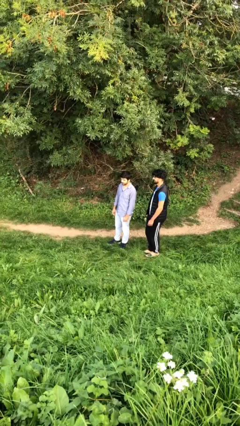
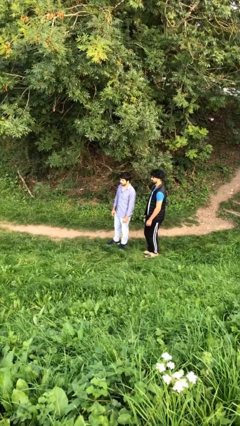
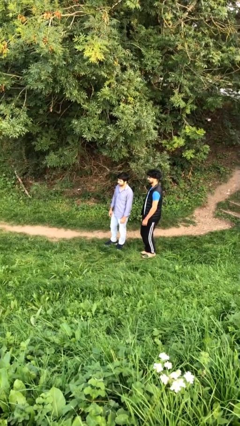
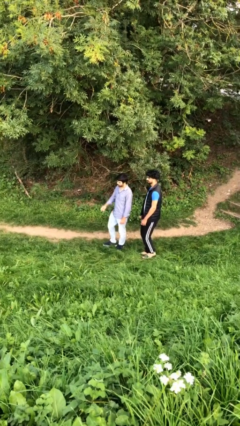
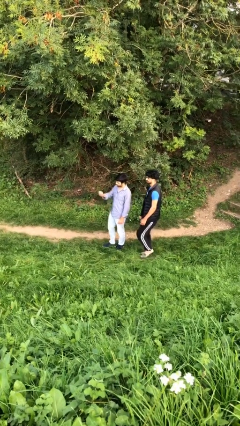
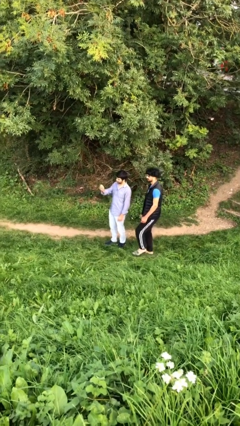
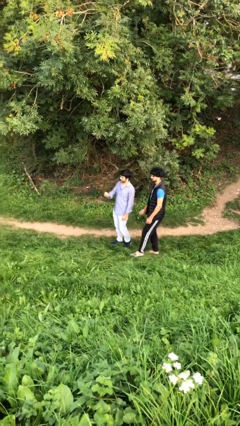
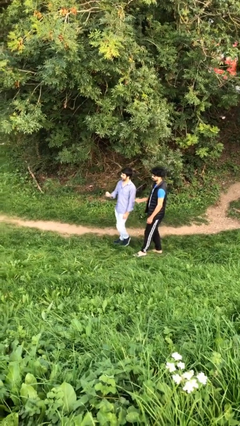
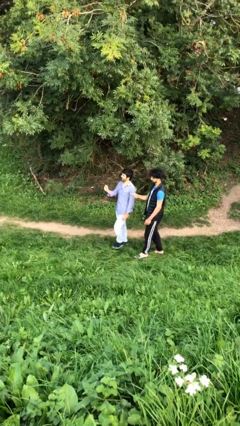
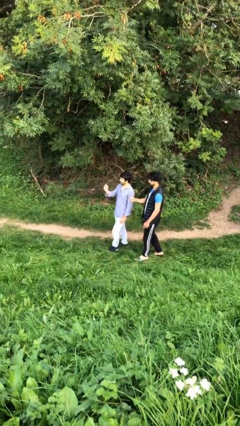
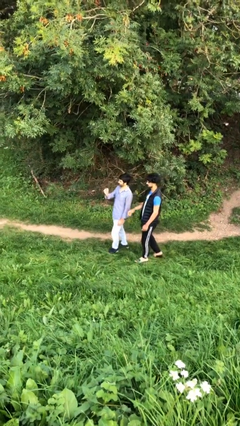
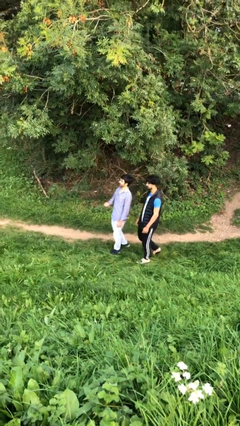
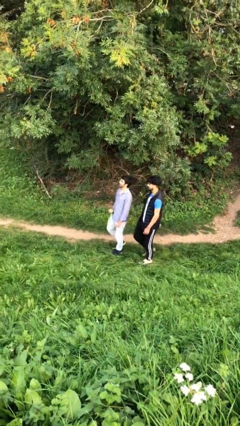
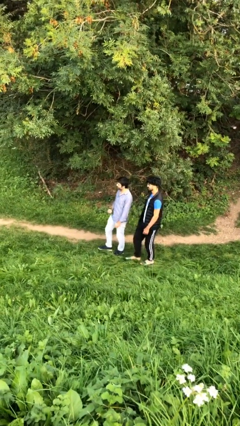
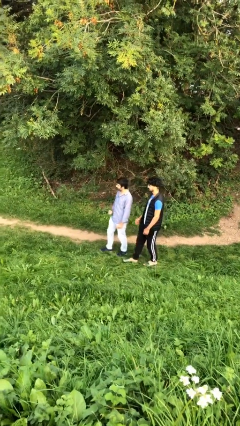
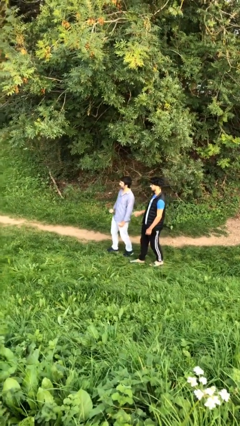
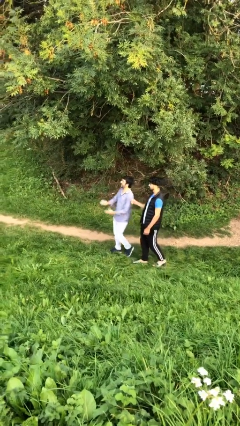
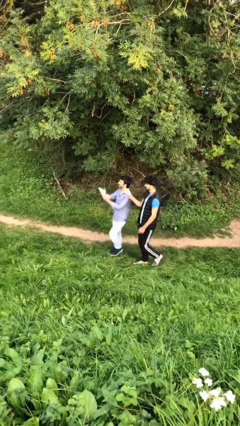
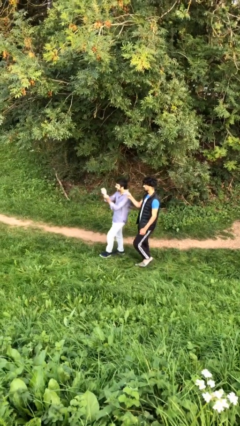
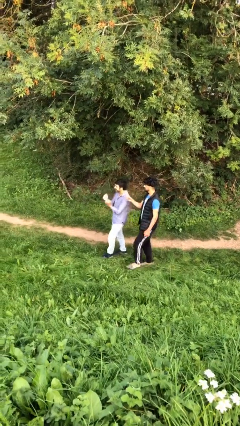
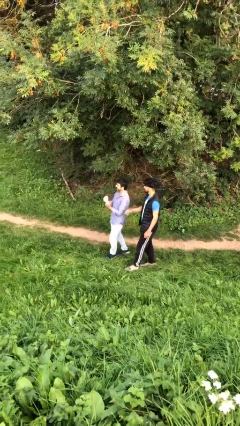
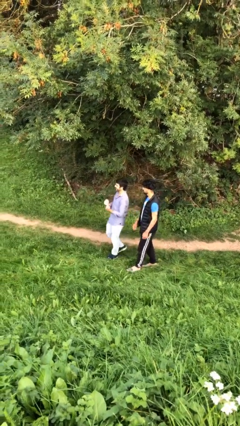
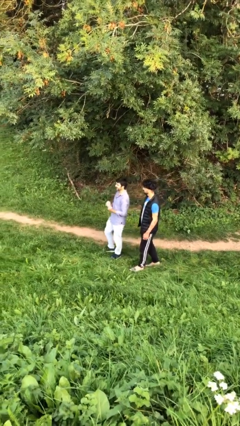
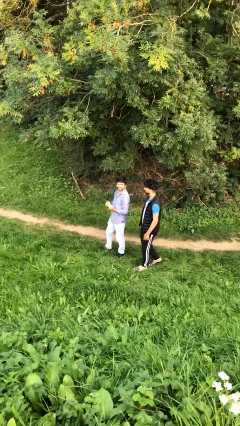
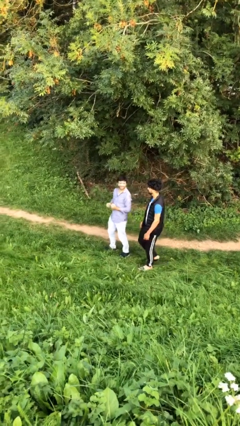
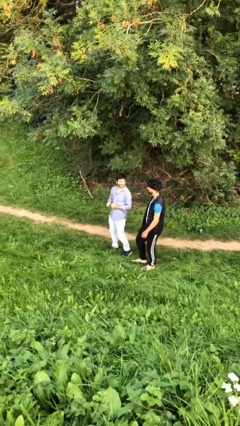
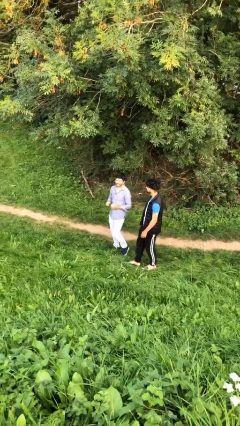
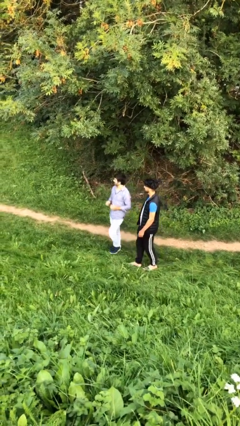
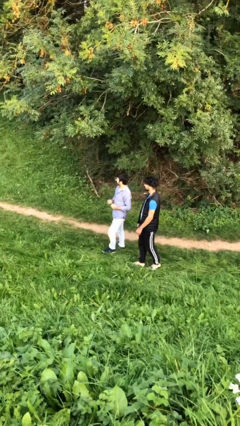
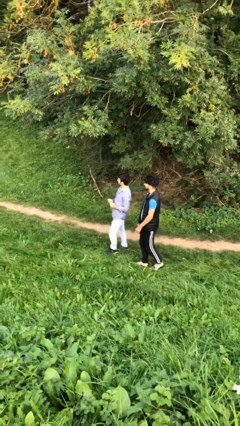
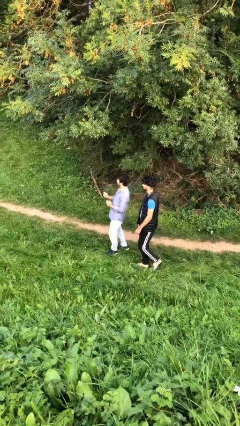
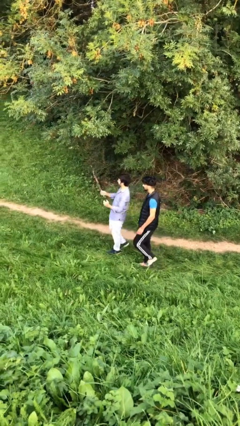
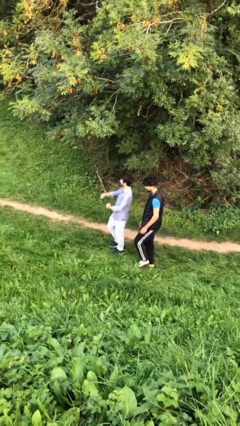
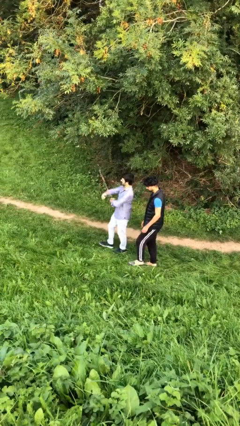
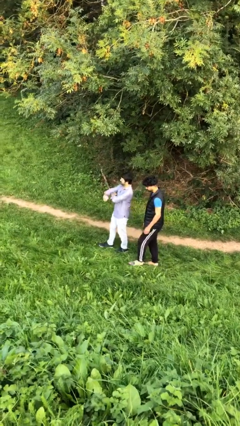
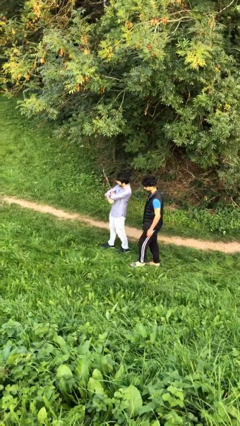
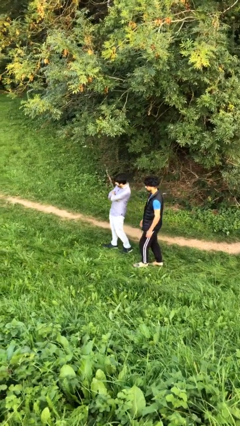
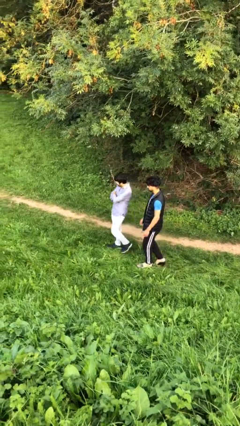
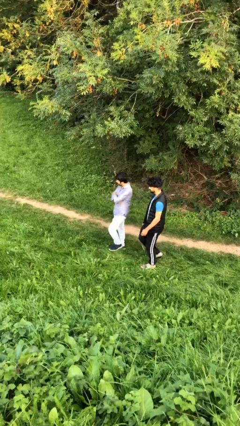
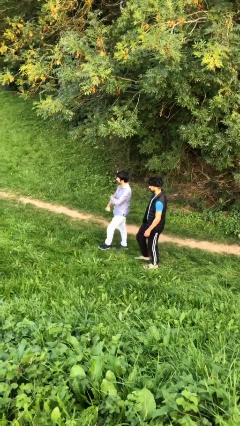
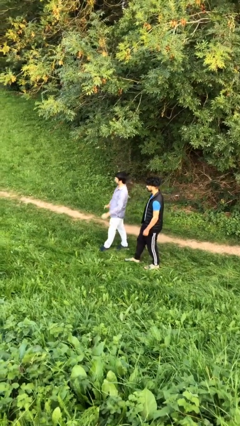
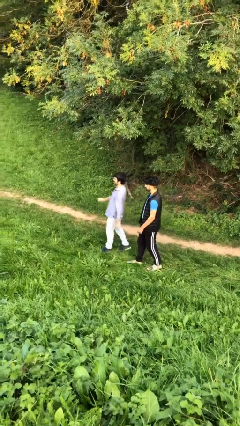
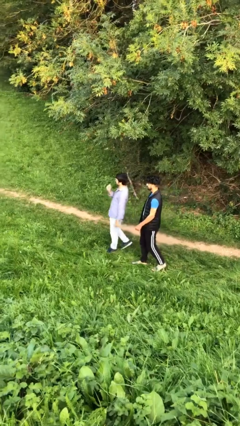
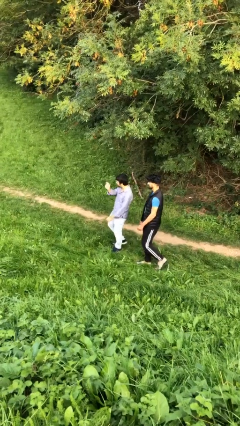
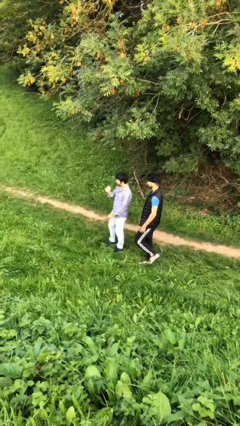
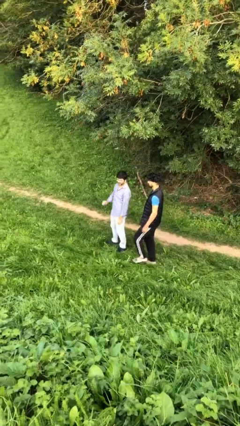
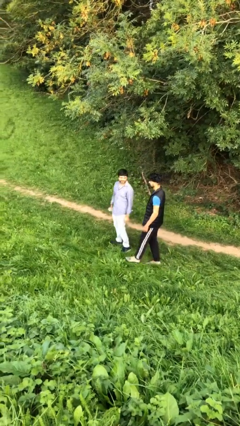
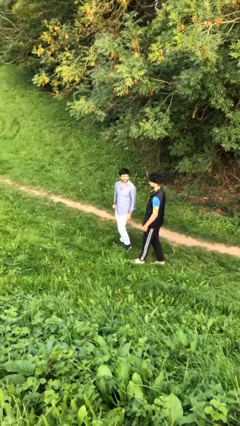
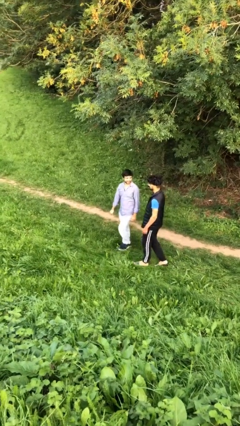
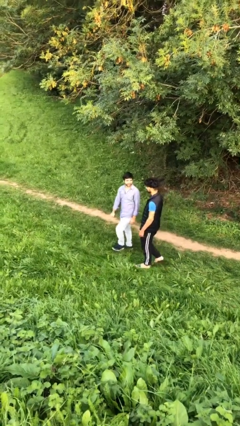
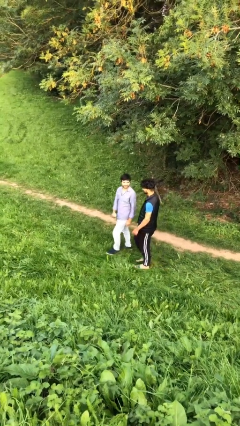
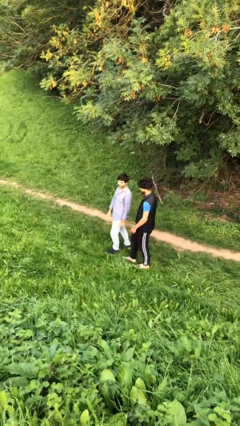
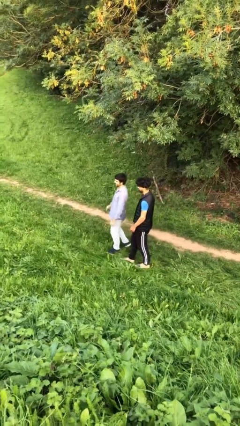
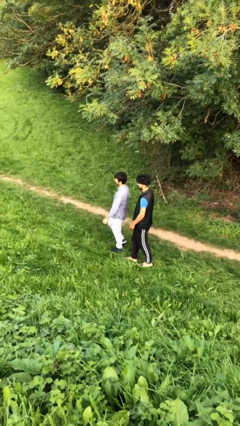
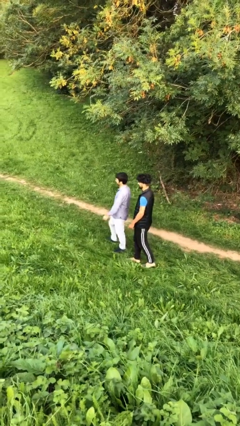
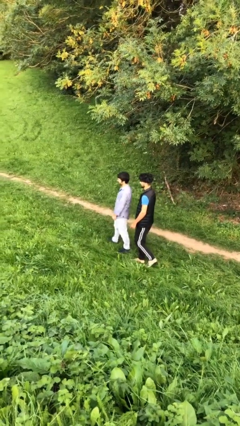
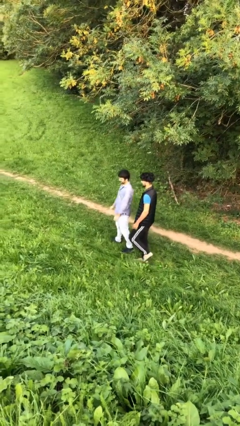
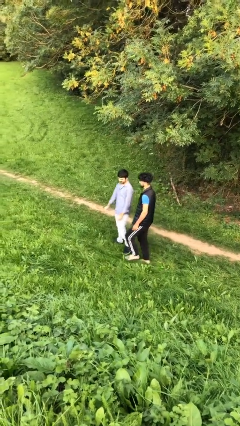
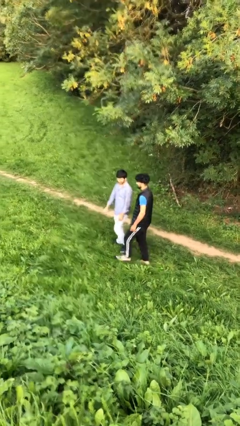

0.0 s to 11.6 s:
person talks to person

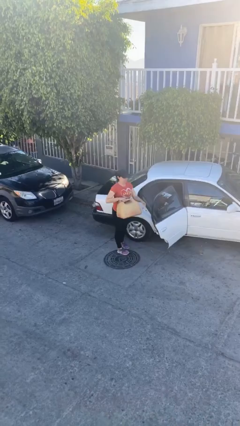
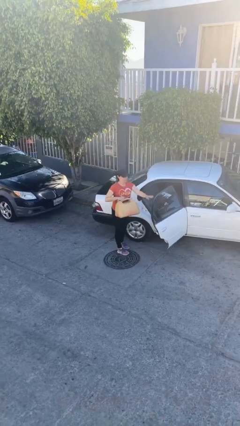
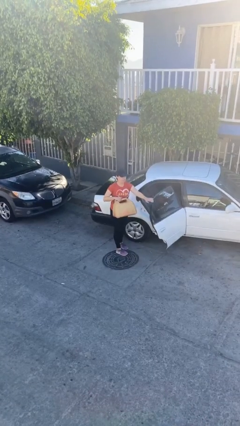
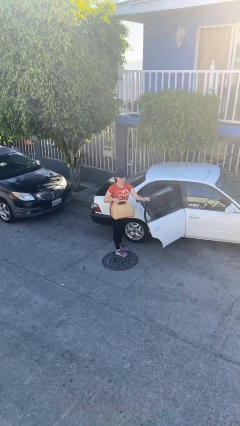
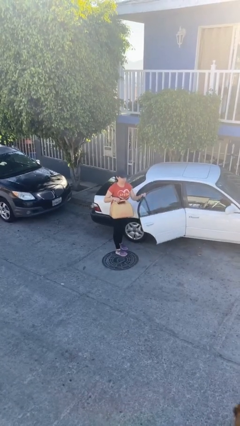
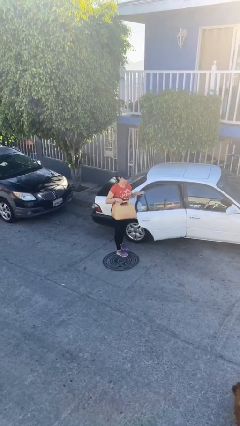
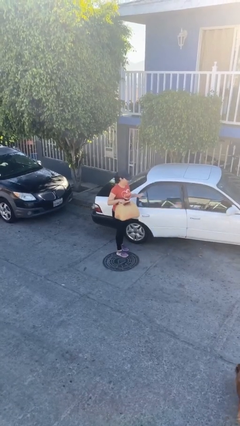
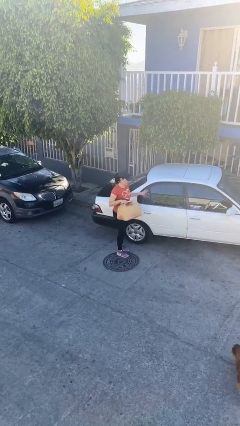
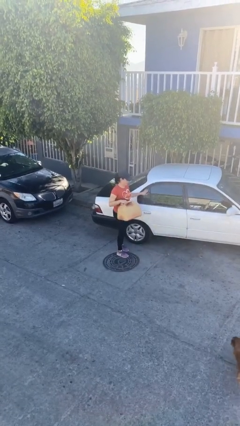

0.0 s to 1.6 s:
person closes car door

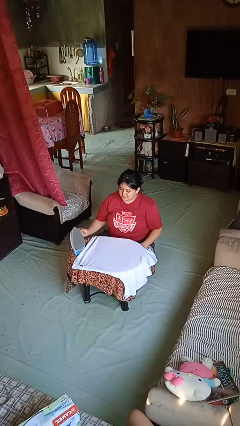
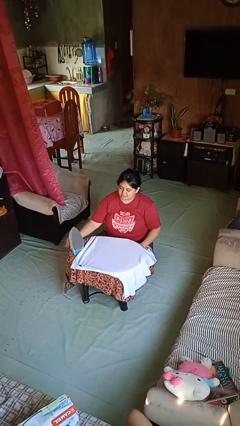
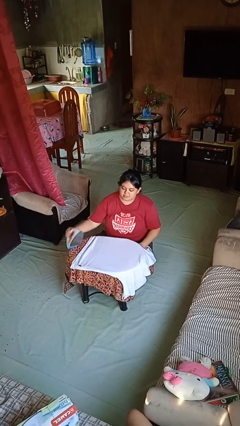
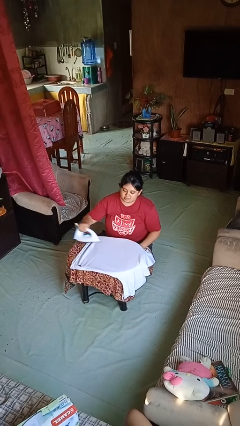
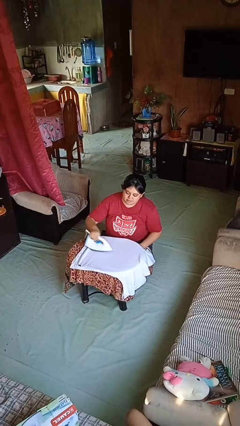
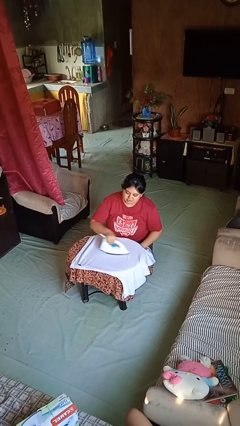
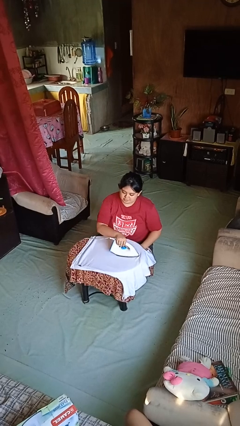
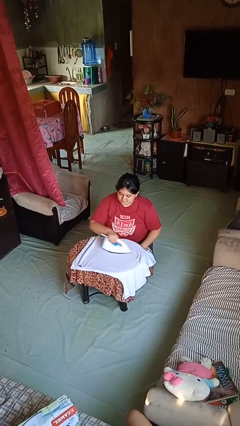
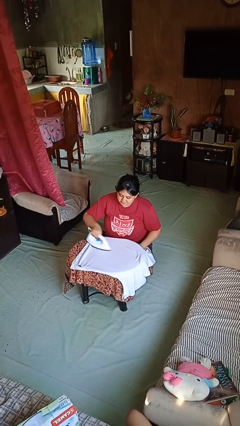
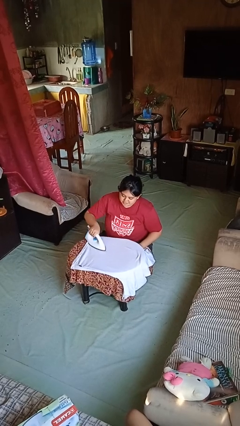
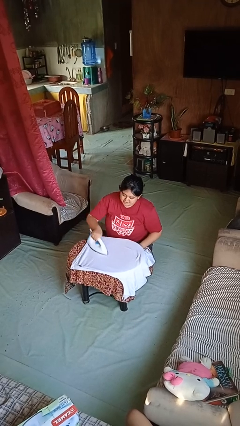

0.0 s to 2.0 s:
person irons clothes

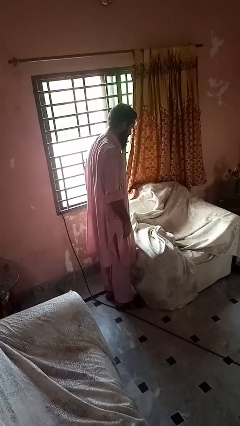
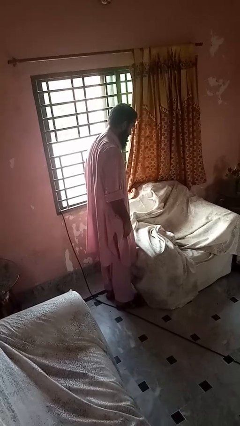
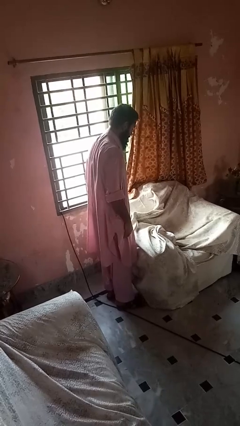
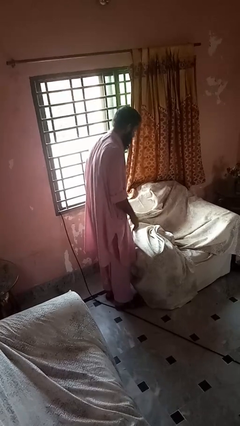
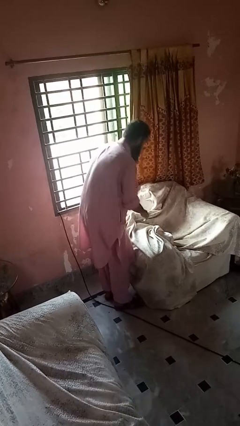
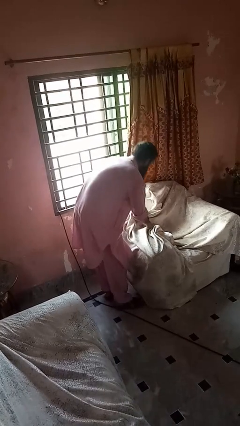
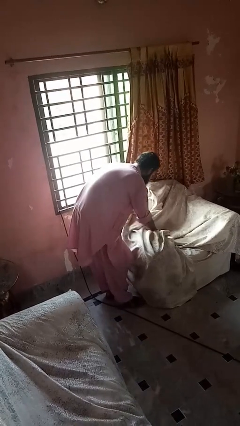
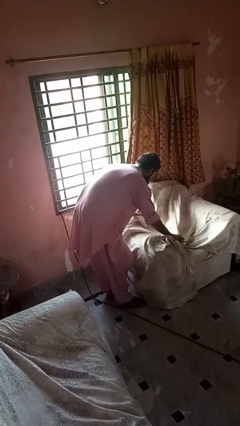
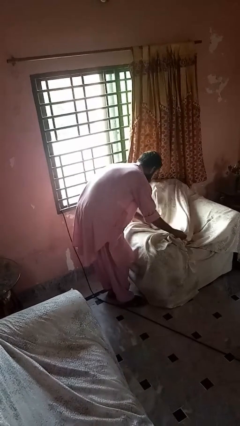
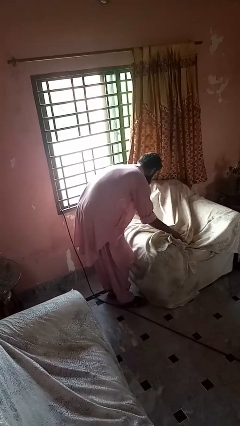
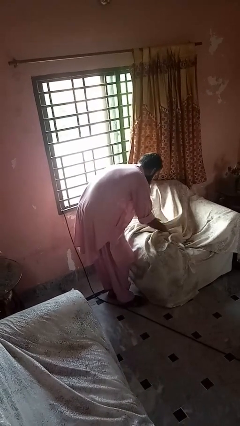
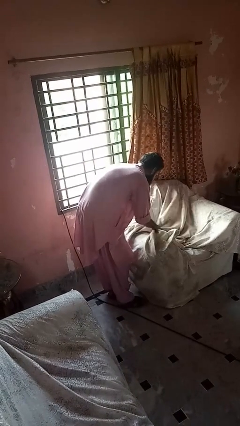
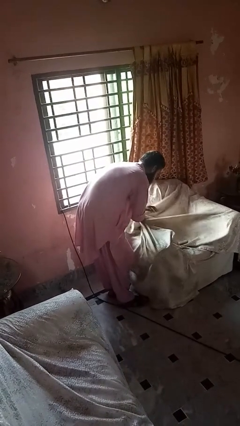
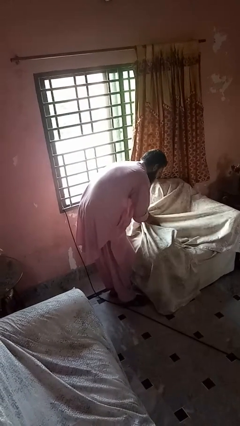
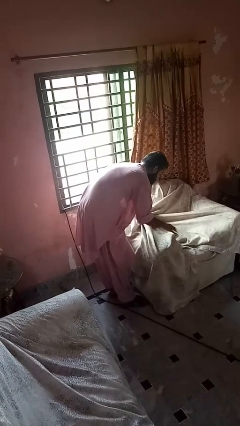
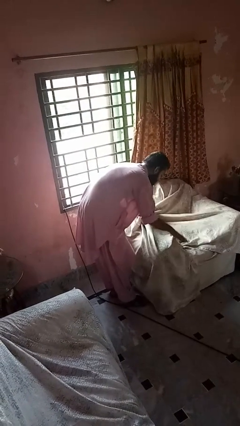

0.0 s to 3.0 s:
person searches in couch
